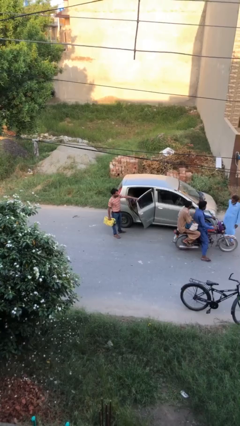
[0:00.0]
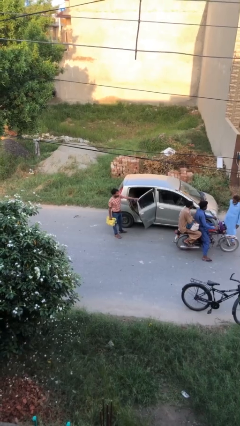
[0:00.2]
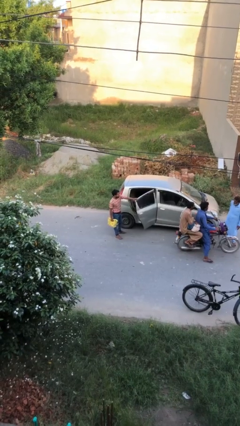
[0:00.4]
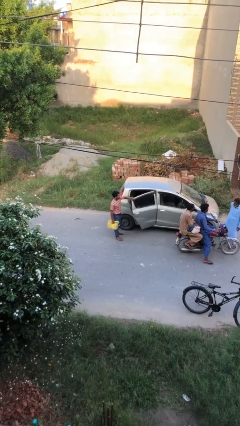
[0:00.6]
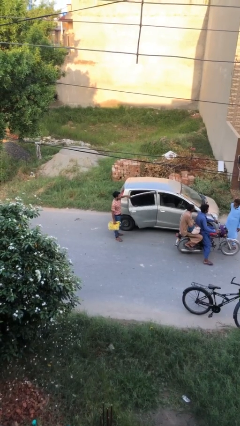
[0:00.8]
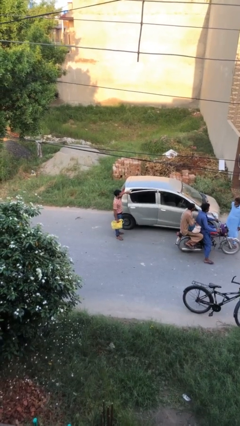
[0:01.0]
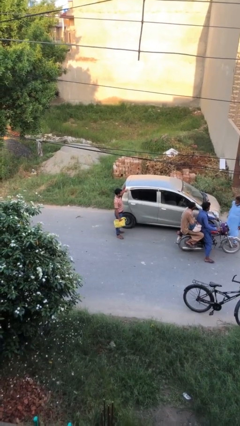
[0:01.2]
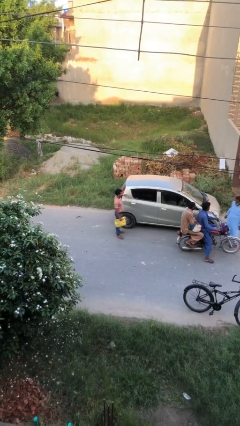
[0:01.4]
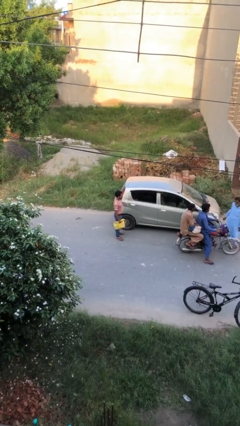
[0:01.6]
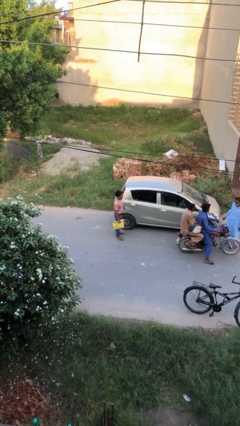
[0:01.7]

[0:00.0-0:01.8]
person closes car door

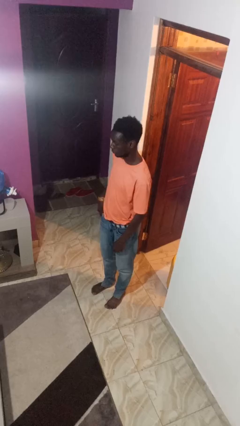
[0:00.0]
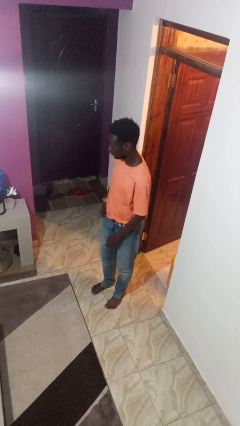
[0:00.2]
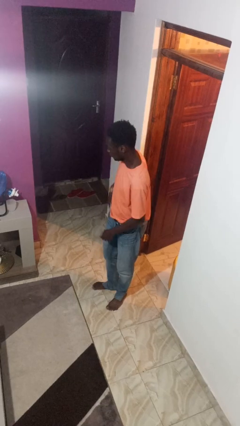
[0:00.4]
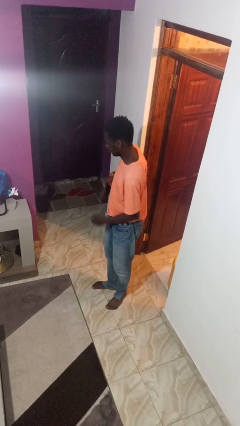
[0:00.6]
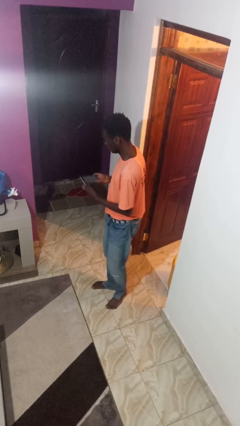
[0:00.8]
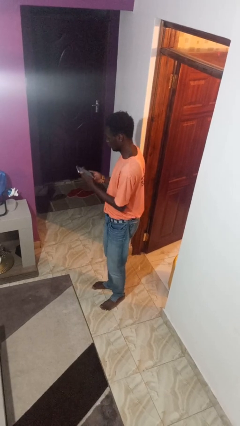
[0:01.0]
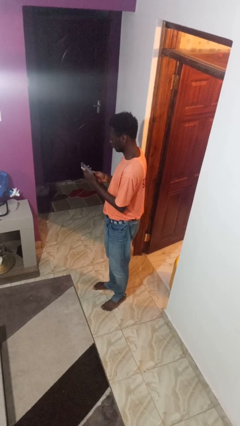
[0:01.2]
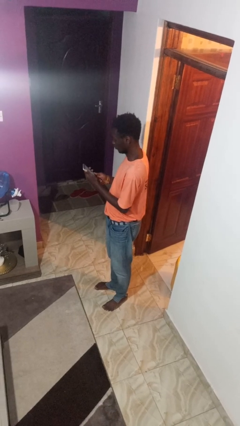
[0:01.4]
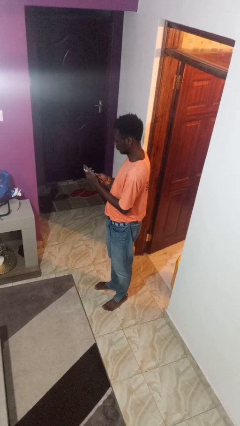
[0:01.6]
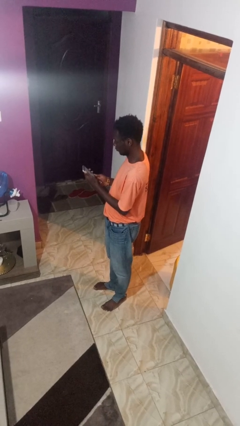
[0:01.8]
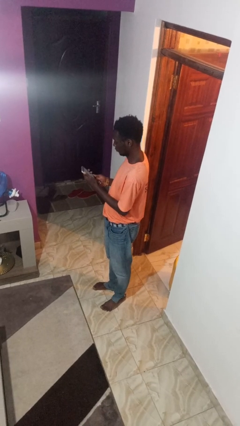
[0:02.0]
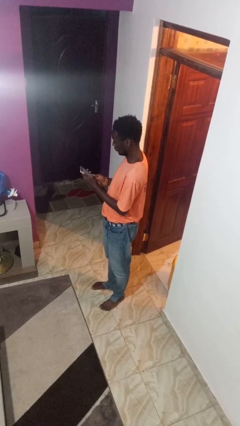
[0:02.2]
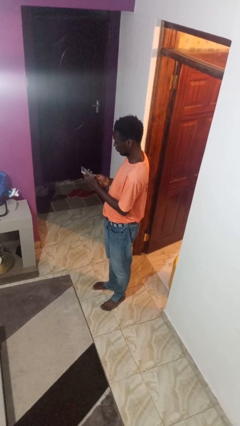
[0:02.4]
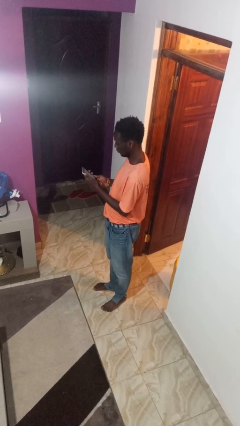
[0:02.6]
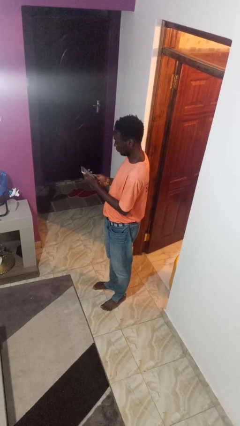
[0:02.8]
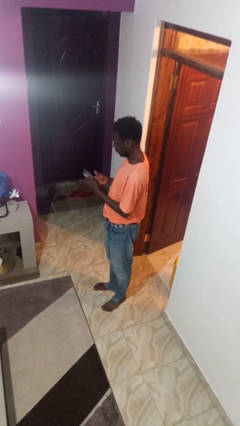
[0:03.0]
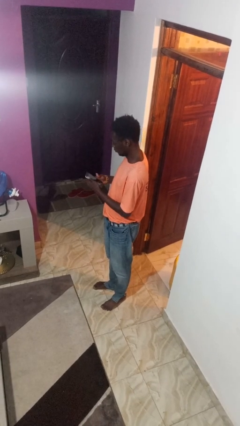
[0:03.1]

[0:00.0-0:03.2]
person takes phone from pocket

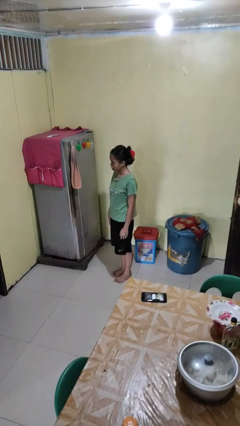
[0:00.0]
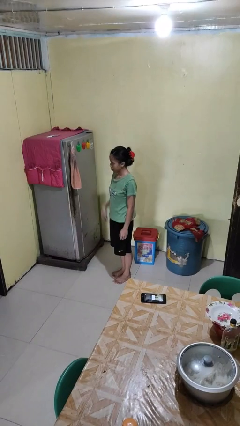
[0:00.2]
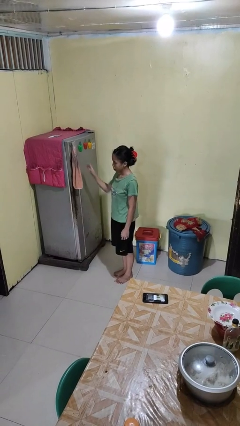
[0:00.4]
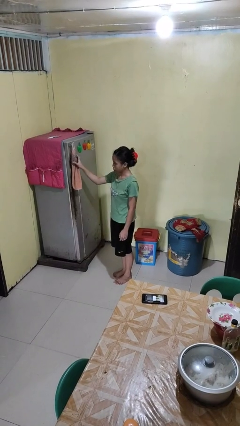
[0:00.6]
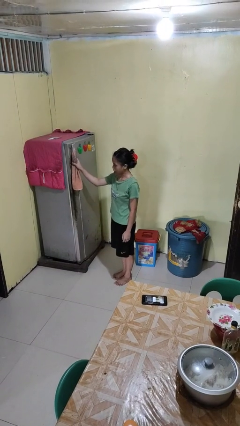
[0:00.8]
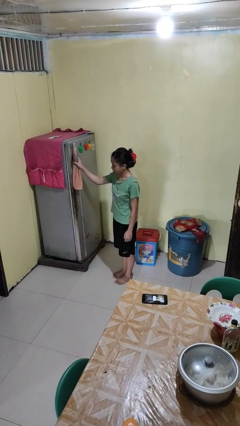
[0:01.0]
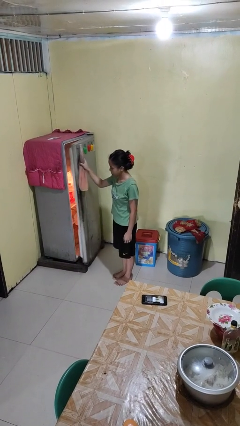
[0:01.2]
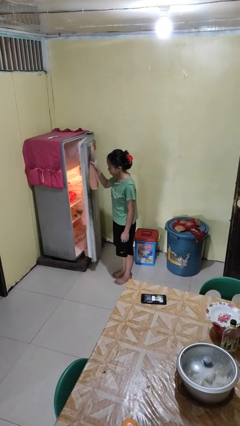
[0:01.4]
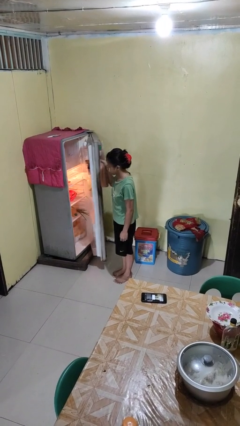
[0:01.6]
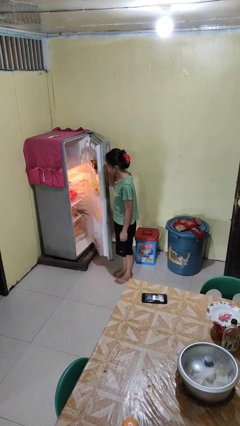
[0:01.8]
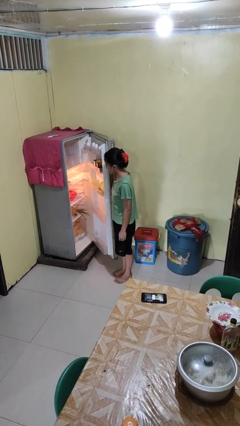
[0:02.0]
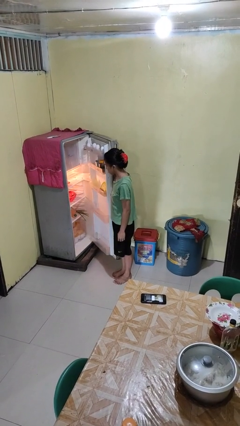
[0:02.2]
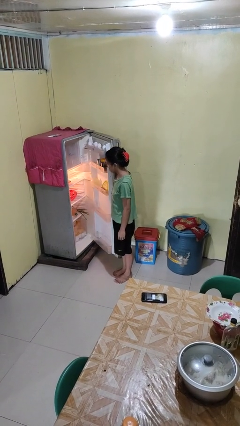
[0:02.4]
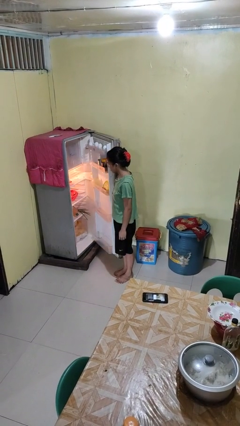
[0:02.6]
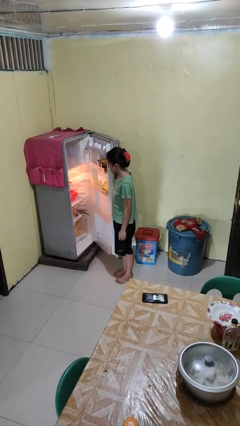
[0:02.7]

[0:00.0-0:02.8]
person opens refrigerator

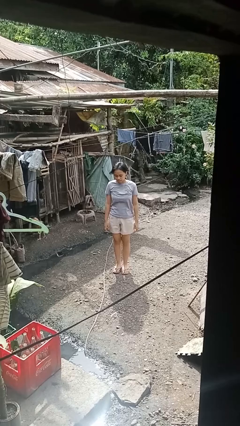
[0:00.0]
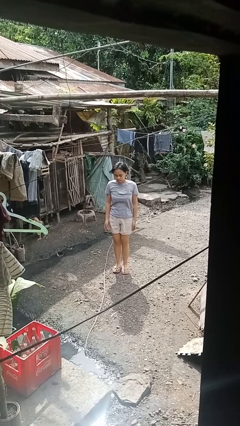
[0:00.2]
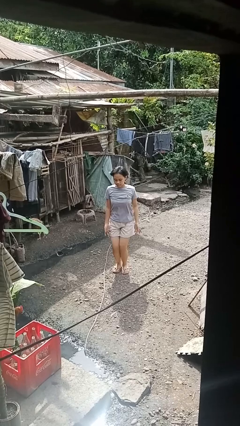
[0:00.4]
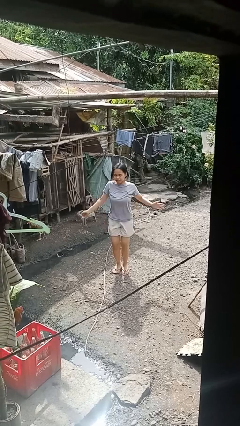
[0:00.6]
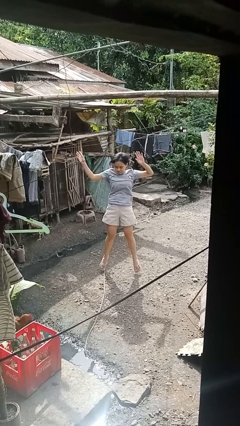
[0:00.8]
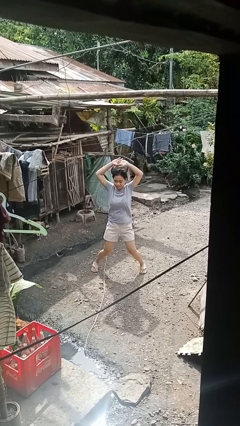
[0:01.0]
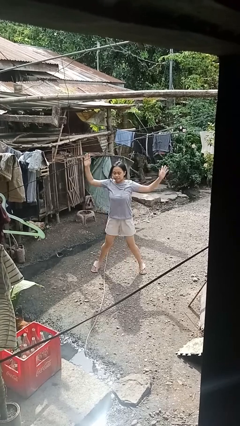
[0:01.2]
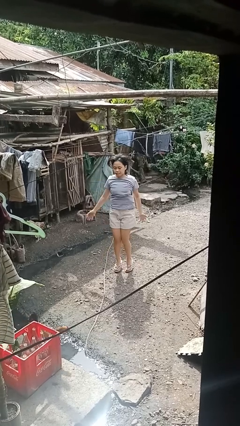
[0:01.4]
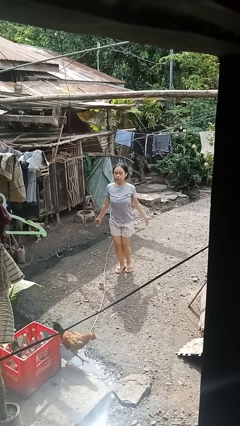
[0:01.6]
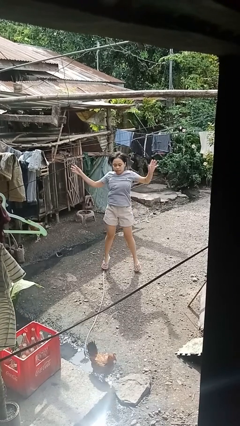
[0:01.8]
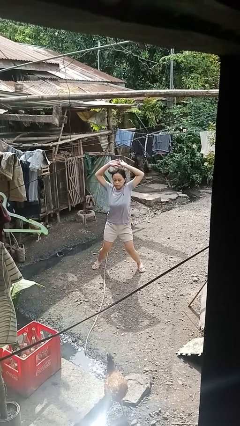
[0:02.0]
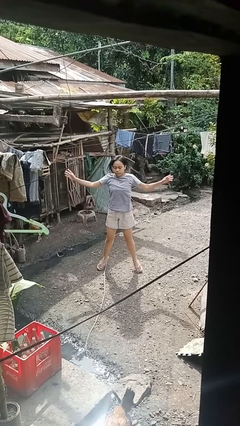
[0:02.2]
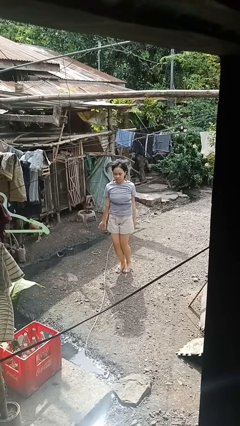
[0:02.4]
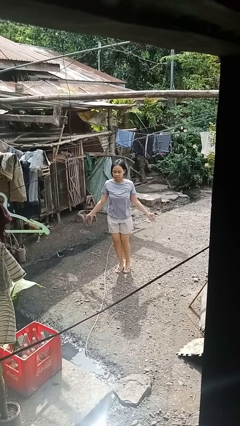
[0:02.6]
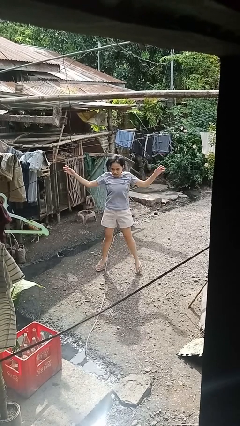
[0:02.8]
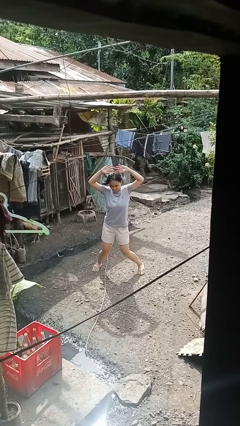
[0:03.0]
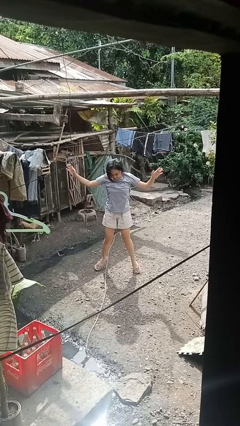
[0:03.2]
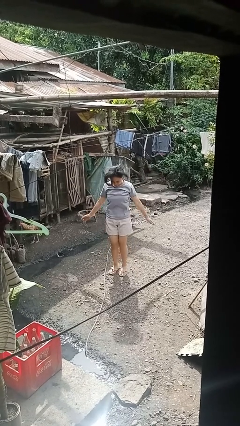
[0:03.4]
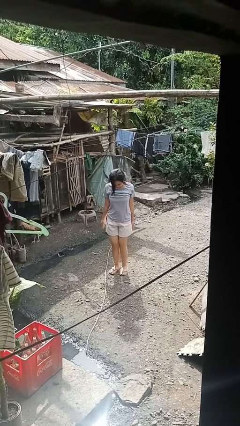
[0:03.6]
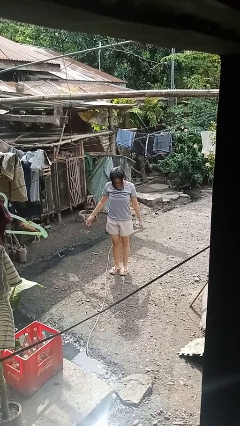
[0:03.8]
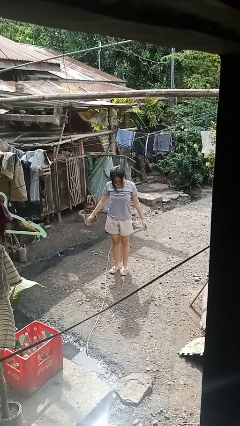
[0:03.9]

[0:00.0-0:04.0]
person exercises with jumping jacks

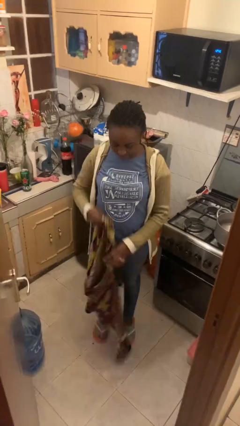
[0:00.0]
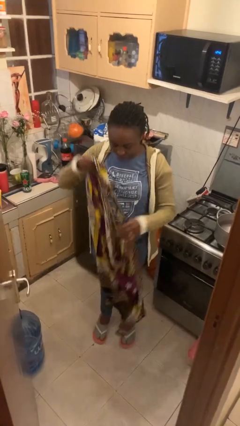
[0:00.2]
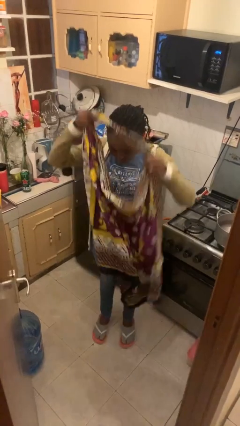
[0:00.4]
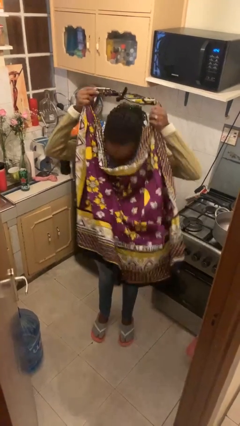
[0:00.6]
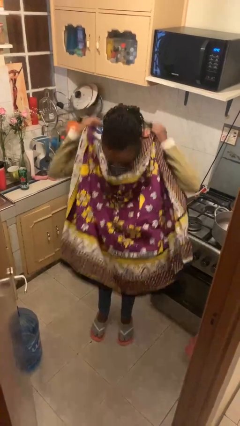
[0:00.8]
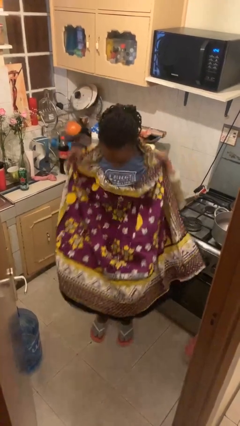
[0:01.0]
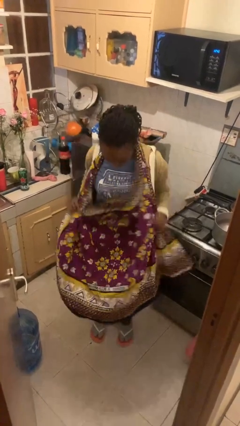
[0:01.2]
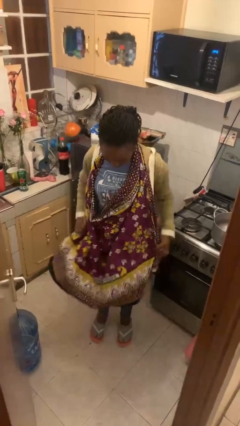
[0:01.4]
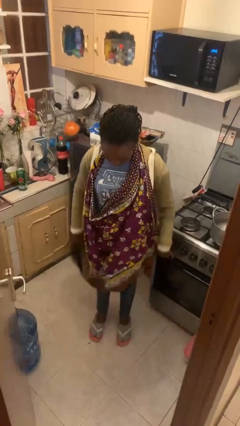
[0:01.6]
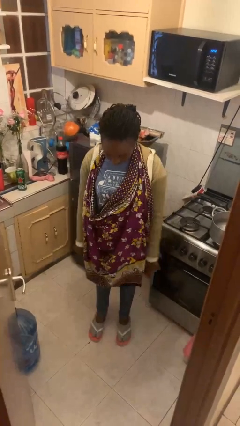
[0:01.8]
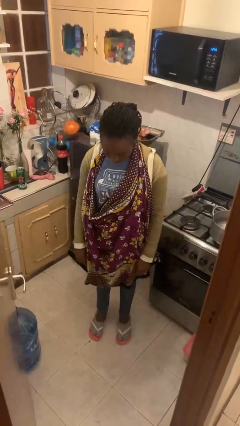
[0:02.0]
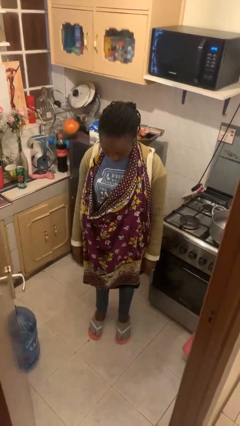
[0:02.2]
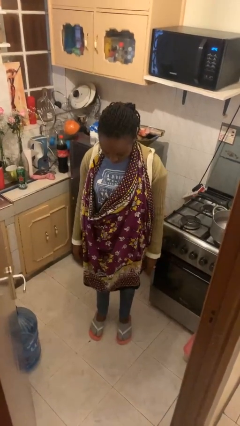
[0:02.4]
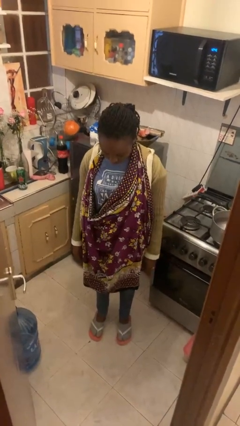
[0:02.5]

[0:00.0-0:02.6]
person puts on apron

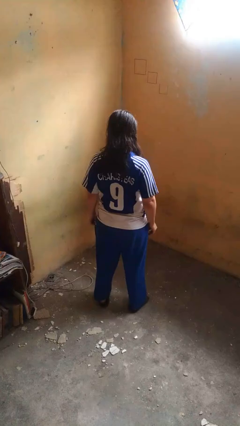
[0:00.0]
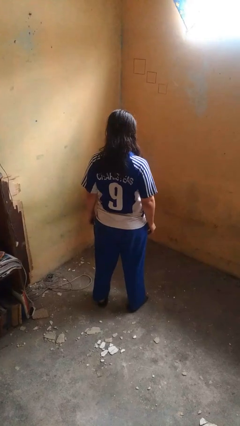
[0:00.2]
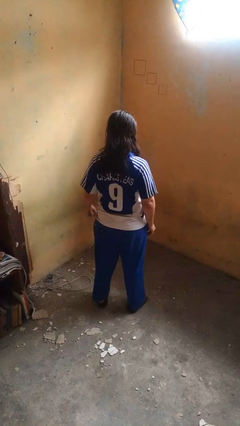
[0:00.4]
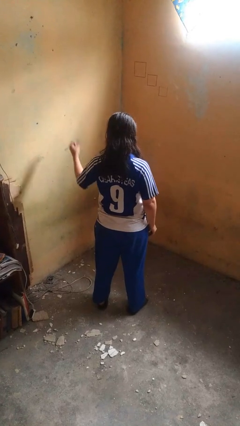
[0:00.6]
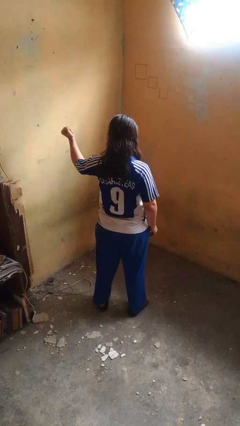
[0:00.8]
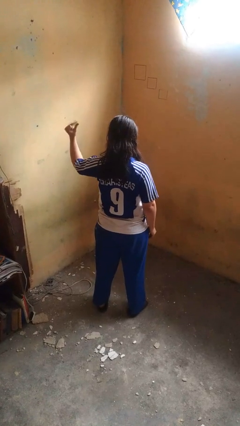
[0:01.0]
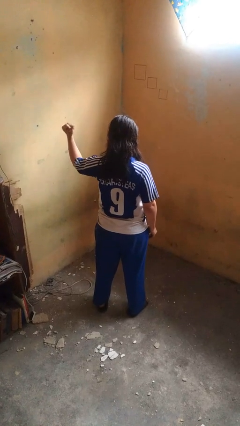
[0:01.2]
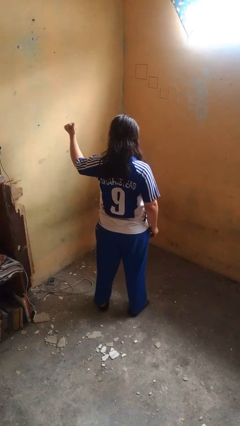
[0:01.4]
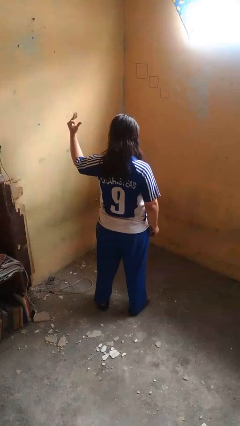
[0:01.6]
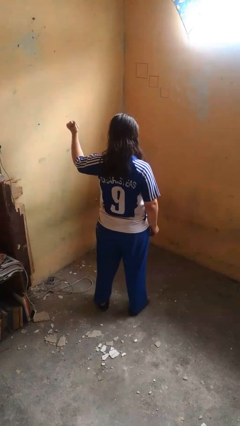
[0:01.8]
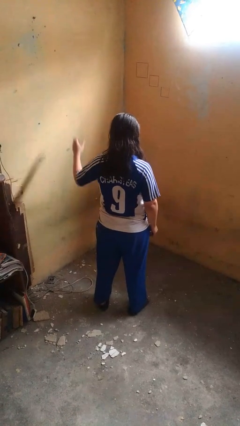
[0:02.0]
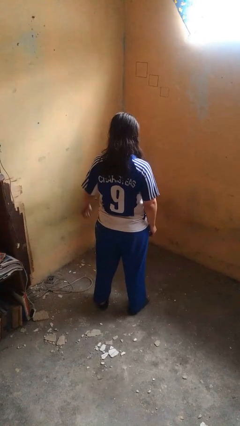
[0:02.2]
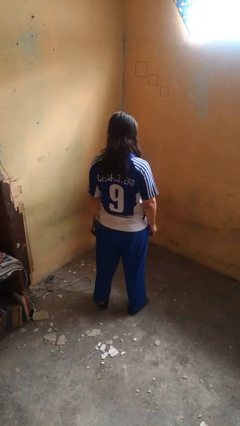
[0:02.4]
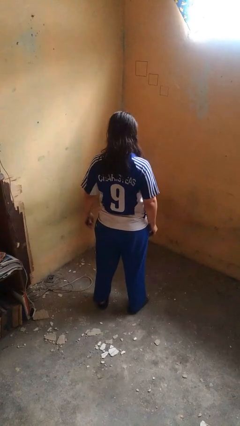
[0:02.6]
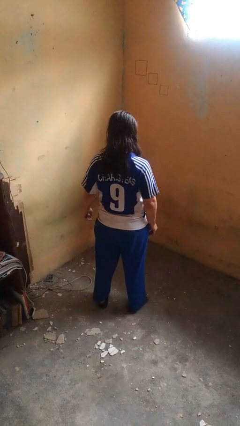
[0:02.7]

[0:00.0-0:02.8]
person snaps fingers

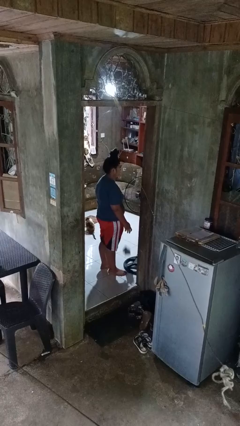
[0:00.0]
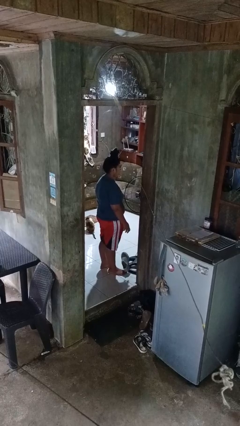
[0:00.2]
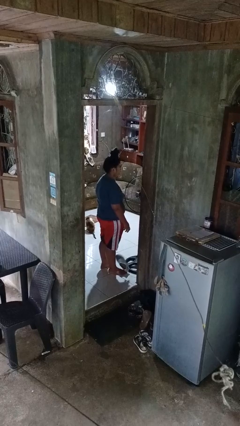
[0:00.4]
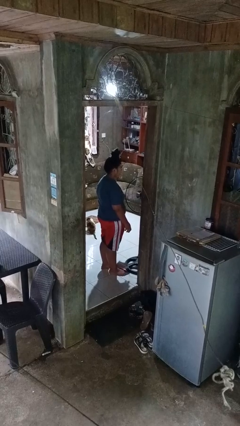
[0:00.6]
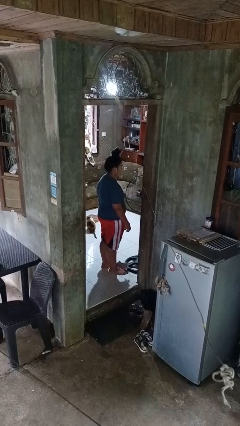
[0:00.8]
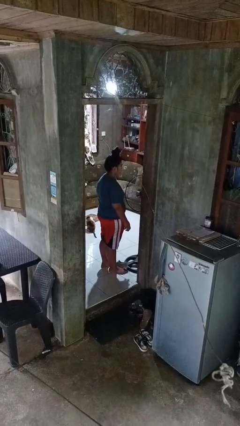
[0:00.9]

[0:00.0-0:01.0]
person drops object
